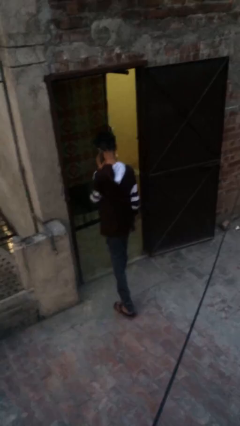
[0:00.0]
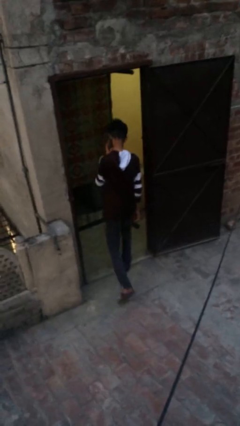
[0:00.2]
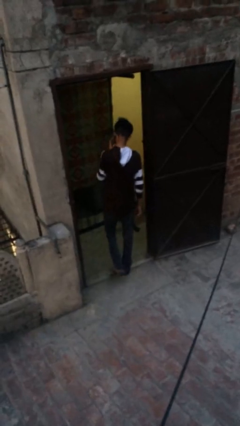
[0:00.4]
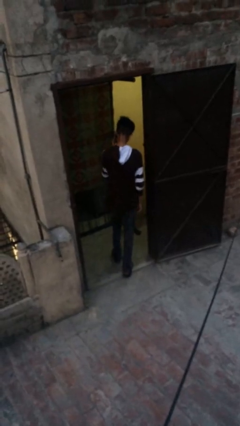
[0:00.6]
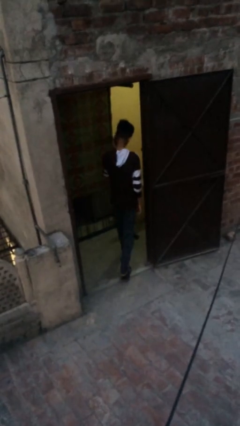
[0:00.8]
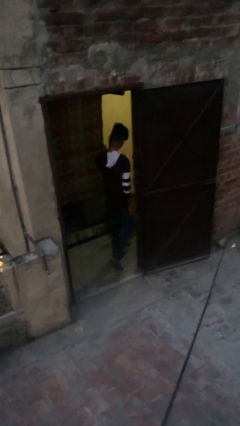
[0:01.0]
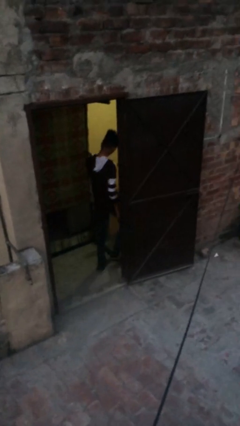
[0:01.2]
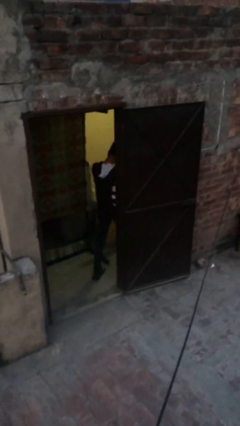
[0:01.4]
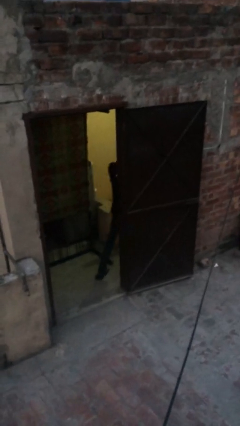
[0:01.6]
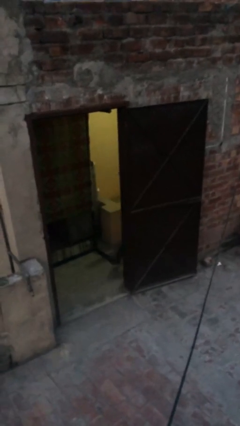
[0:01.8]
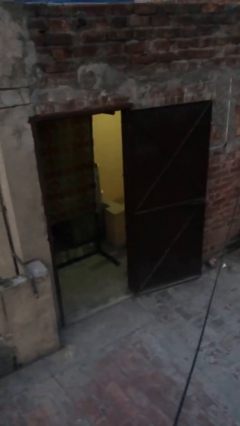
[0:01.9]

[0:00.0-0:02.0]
person exits scene through structure

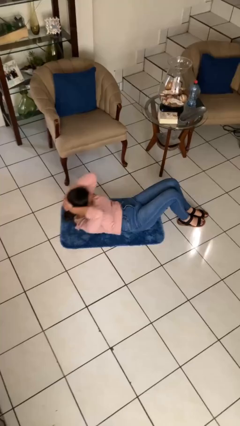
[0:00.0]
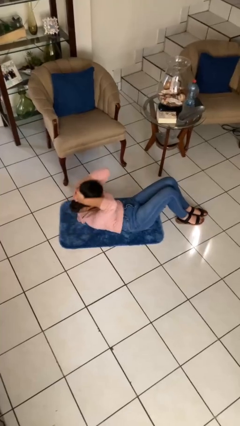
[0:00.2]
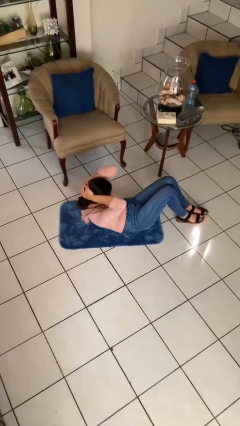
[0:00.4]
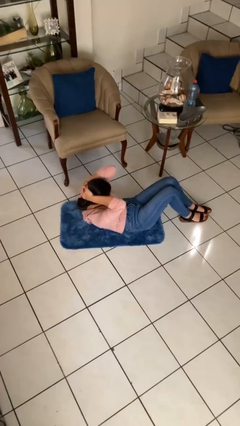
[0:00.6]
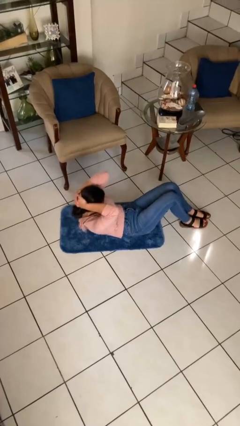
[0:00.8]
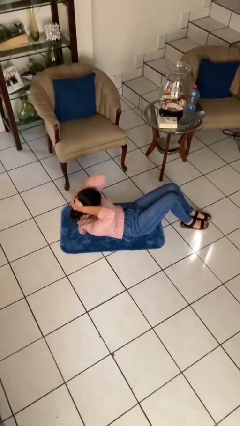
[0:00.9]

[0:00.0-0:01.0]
person exercises with situp

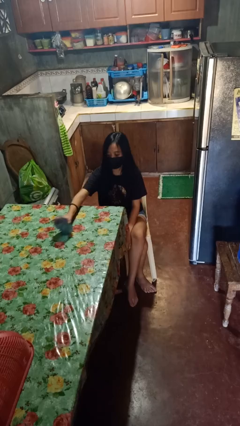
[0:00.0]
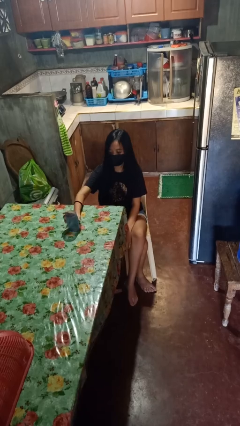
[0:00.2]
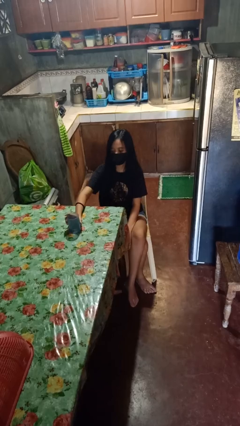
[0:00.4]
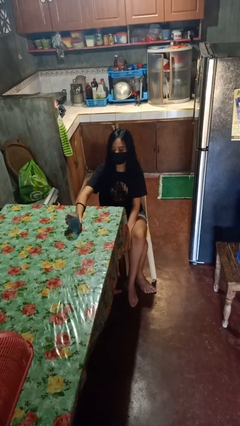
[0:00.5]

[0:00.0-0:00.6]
person sets upright glass

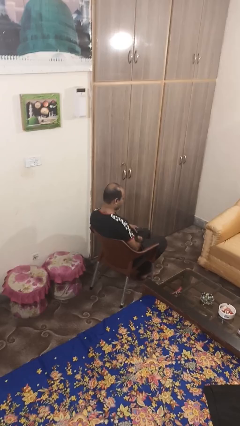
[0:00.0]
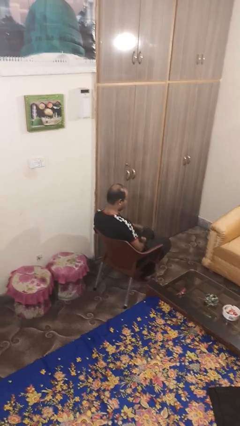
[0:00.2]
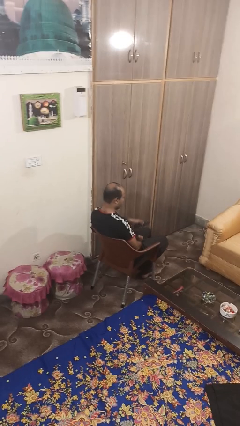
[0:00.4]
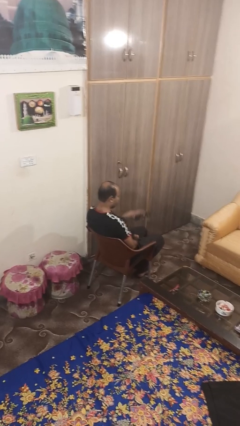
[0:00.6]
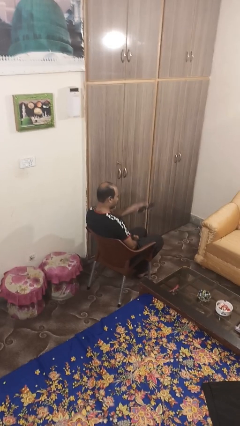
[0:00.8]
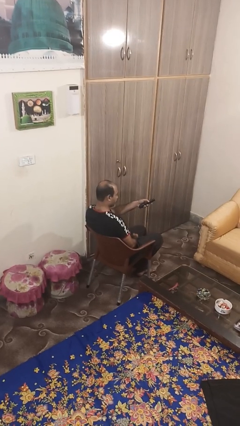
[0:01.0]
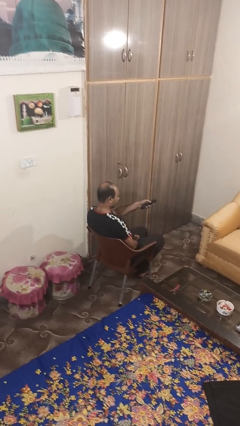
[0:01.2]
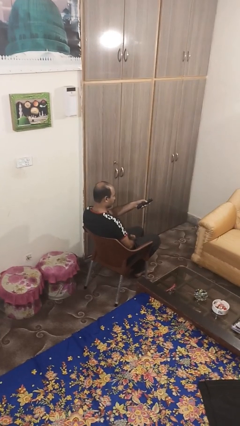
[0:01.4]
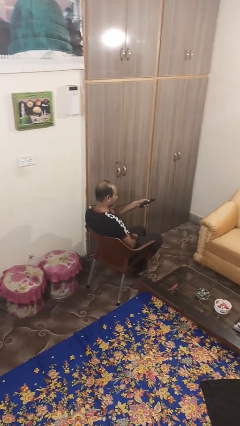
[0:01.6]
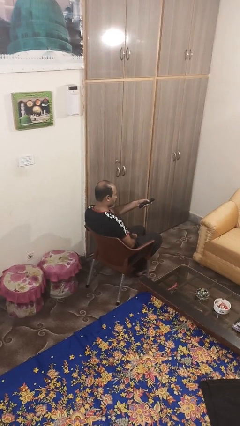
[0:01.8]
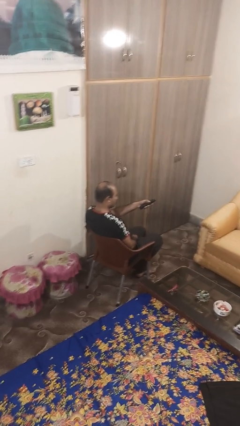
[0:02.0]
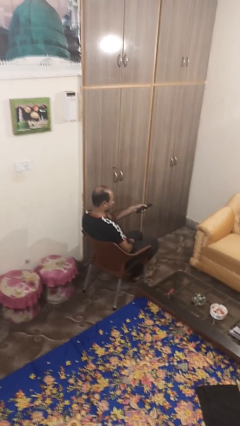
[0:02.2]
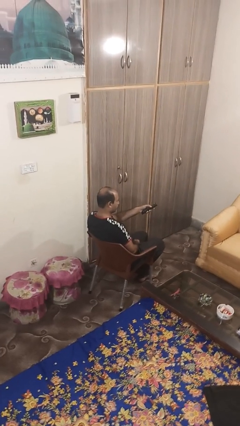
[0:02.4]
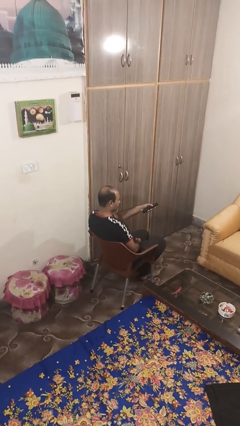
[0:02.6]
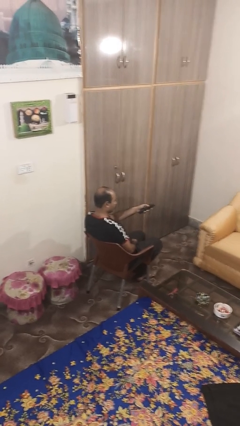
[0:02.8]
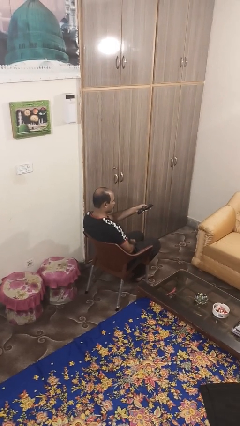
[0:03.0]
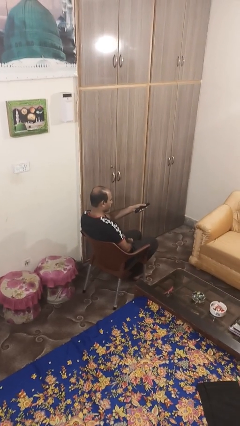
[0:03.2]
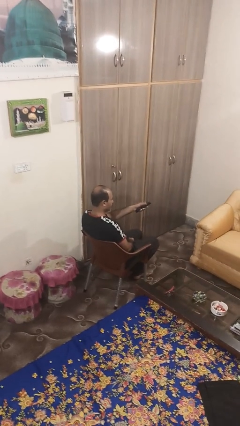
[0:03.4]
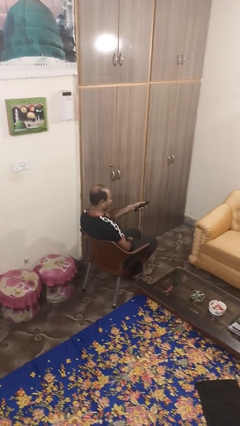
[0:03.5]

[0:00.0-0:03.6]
person uses television remote

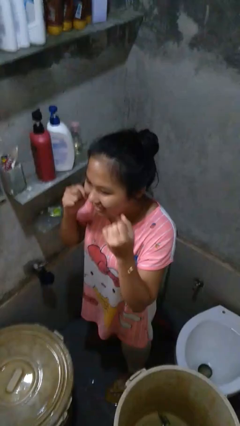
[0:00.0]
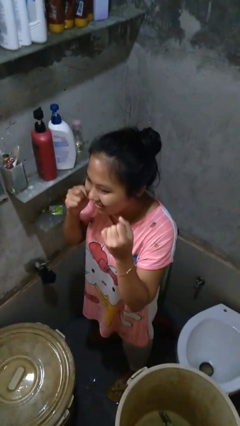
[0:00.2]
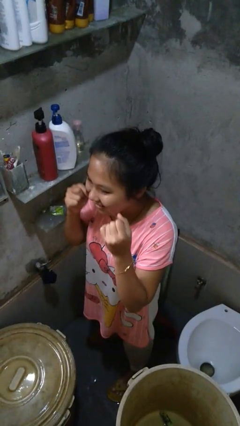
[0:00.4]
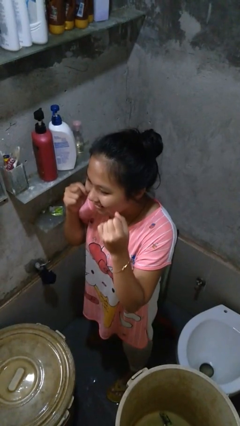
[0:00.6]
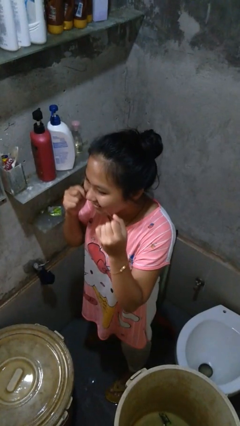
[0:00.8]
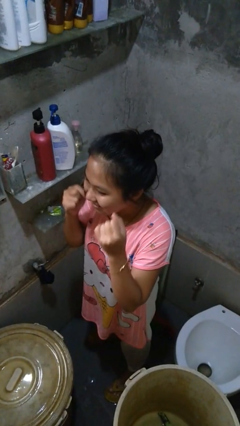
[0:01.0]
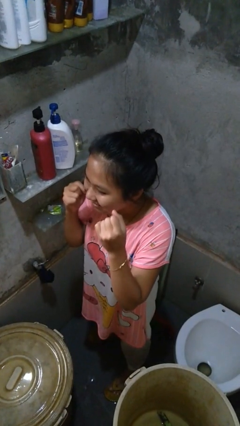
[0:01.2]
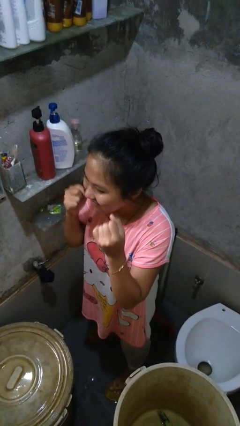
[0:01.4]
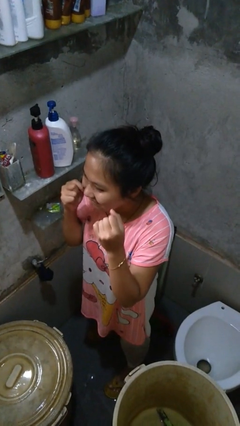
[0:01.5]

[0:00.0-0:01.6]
person flosses

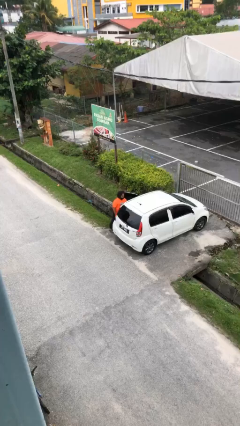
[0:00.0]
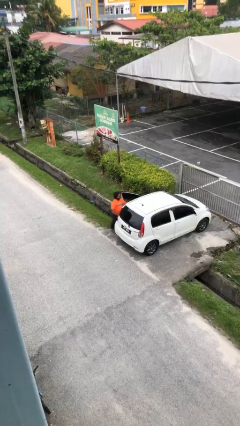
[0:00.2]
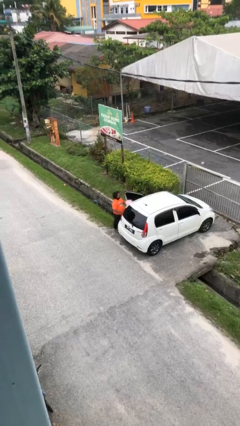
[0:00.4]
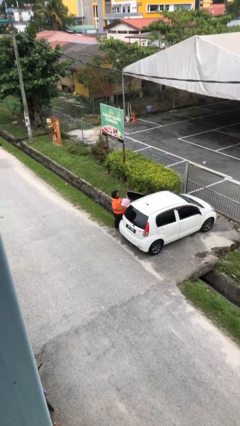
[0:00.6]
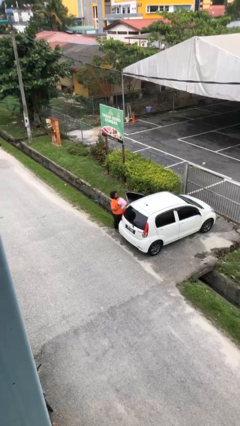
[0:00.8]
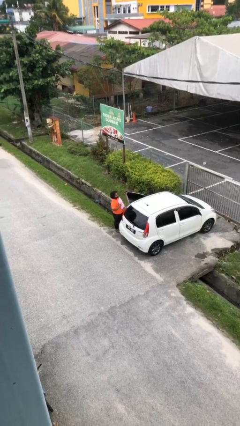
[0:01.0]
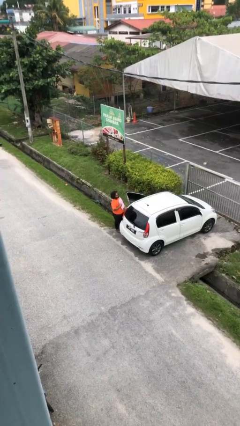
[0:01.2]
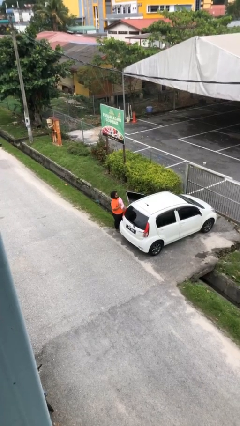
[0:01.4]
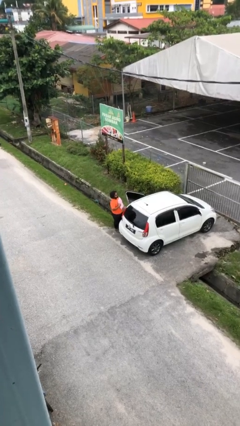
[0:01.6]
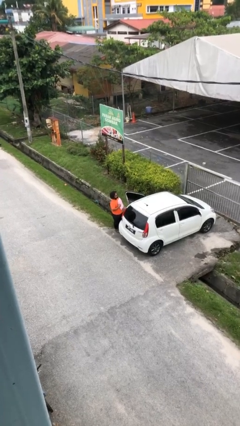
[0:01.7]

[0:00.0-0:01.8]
person unloads car

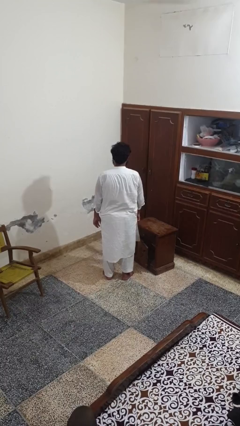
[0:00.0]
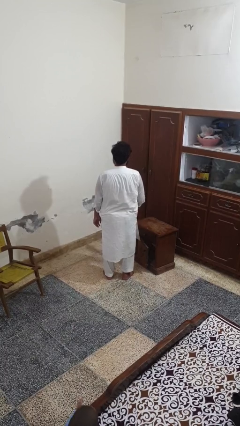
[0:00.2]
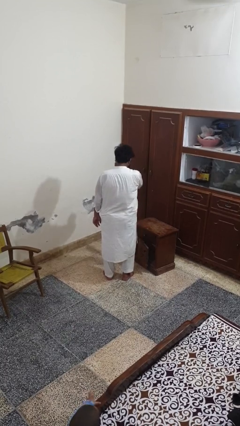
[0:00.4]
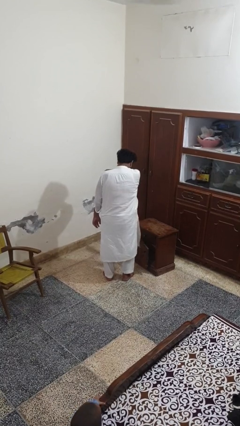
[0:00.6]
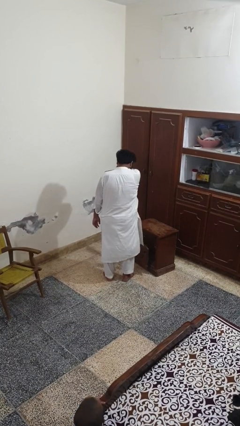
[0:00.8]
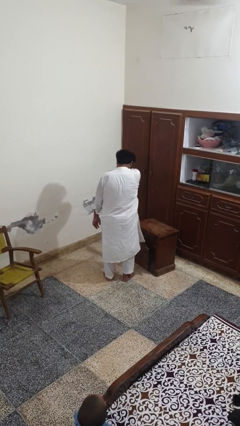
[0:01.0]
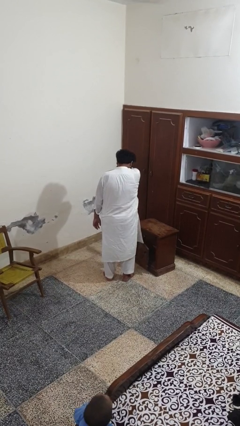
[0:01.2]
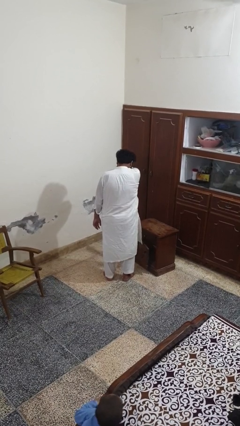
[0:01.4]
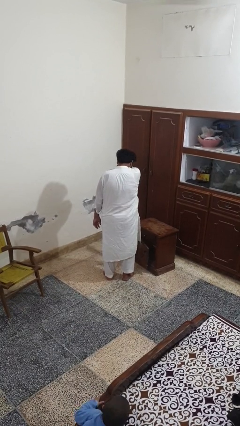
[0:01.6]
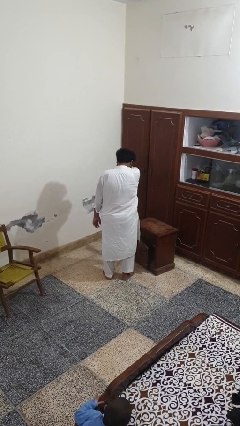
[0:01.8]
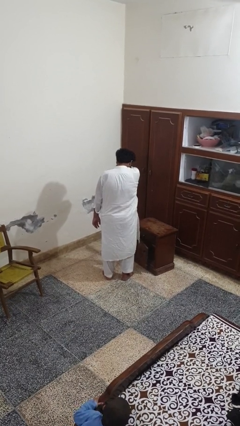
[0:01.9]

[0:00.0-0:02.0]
person sneezes into arm

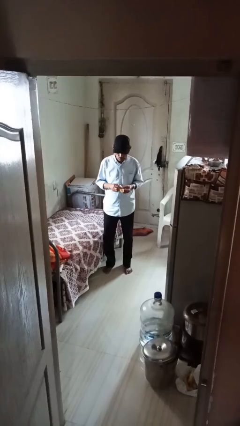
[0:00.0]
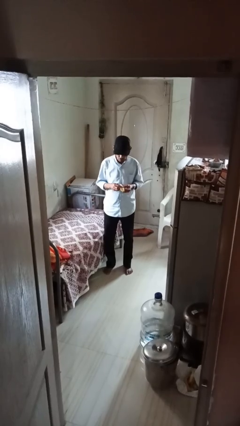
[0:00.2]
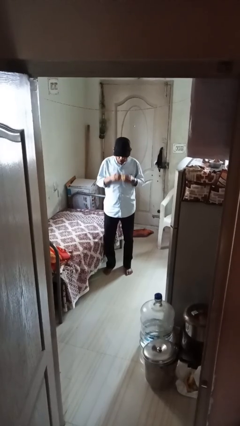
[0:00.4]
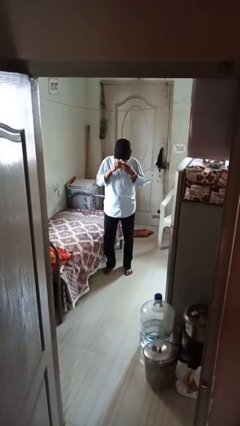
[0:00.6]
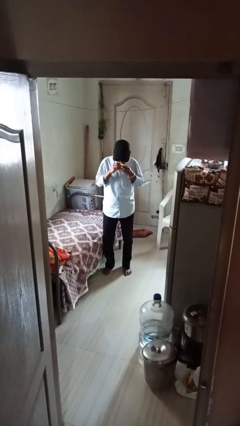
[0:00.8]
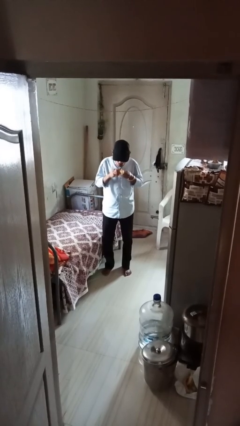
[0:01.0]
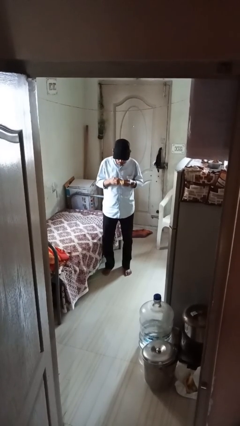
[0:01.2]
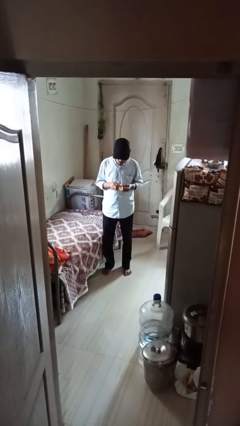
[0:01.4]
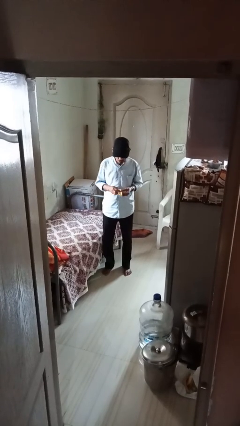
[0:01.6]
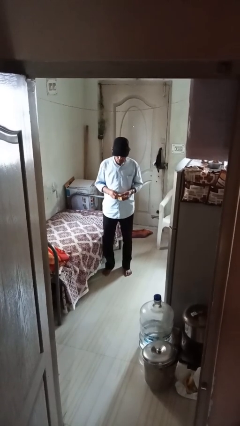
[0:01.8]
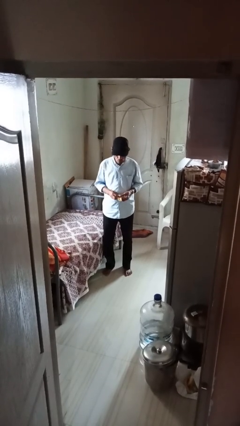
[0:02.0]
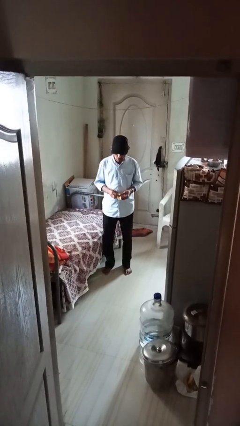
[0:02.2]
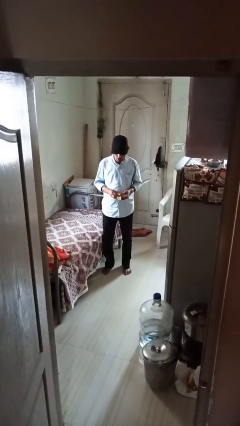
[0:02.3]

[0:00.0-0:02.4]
person eats banana

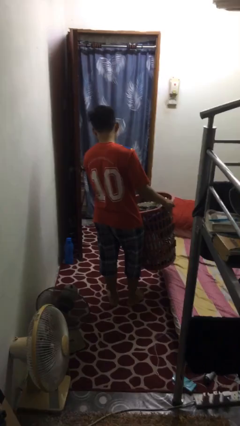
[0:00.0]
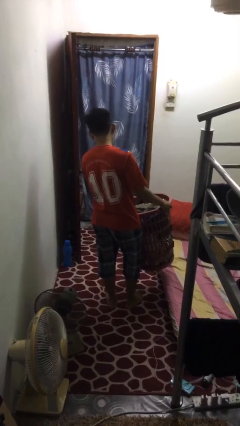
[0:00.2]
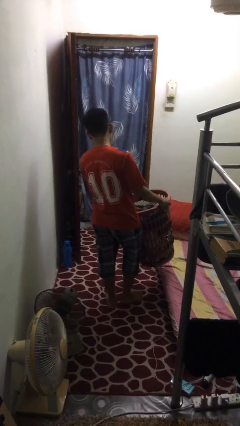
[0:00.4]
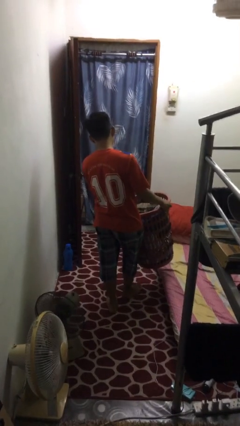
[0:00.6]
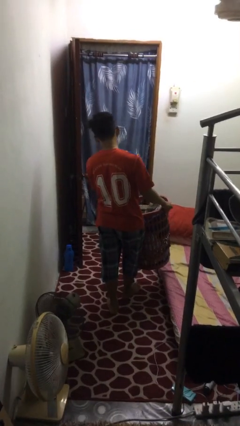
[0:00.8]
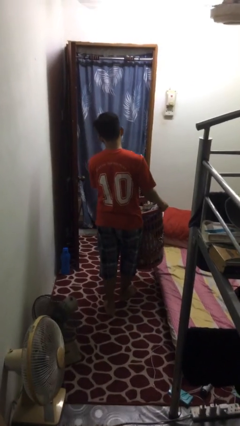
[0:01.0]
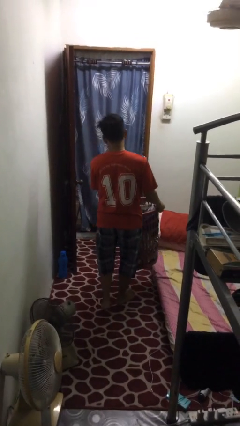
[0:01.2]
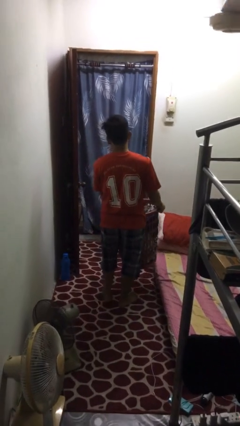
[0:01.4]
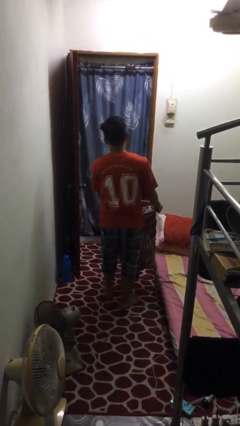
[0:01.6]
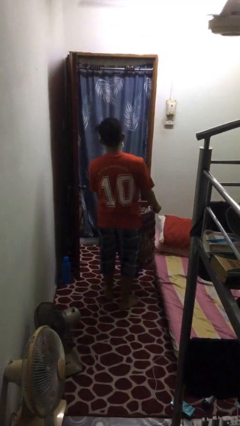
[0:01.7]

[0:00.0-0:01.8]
person carries laundry basket

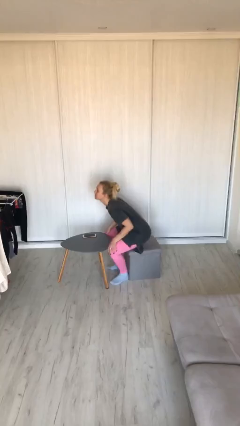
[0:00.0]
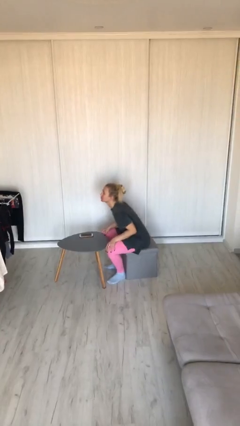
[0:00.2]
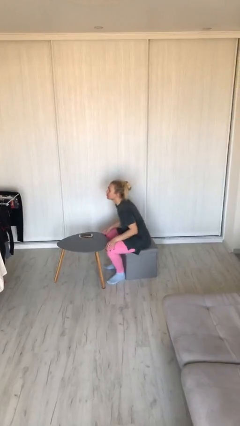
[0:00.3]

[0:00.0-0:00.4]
person sits down
